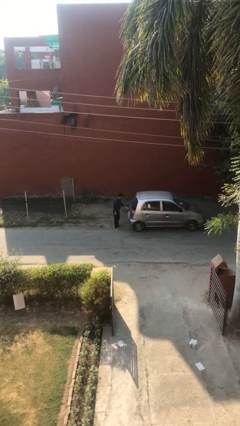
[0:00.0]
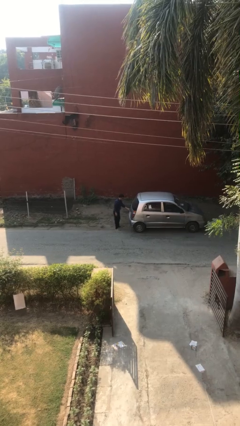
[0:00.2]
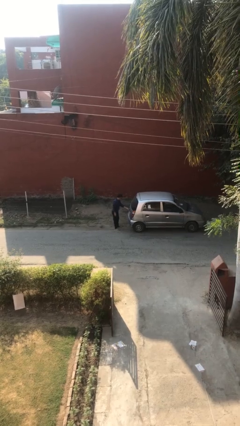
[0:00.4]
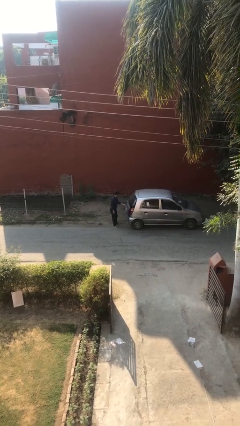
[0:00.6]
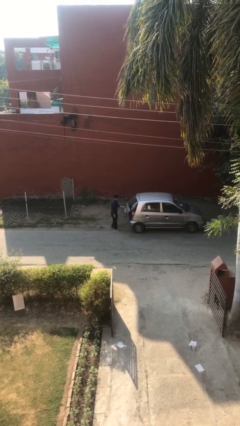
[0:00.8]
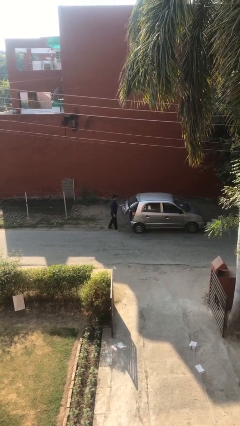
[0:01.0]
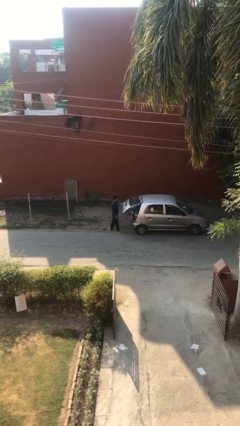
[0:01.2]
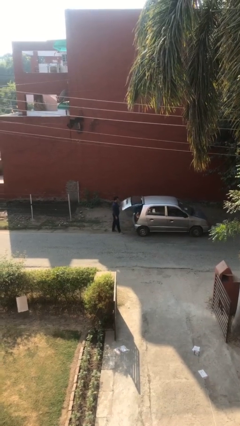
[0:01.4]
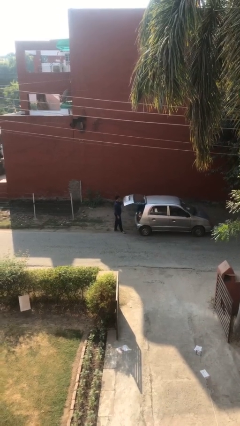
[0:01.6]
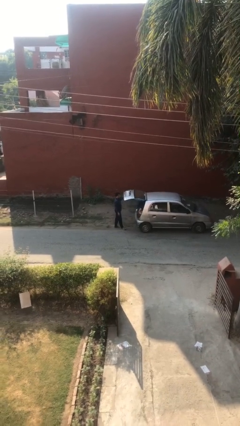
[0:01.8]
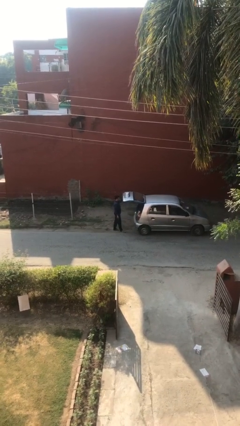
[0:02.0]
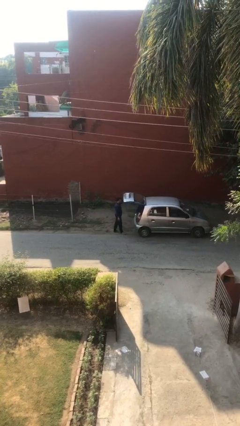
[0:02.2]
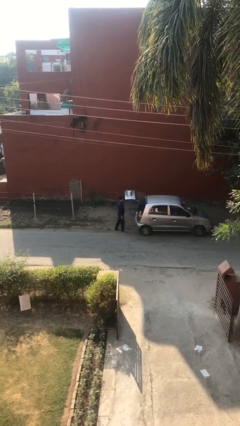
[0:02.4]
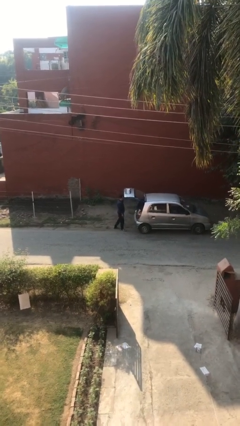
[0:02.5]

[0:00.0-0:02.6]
person opens car trunk

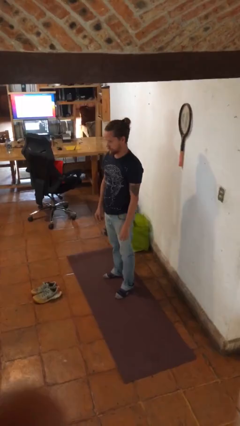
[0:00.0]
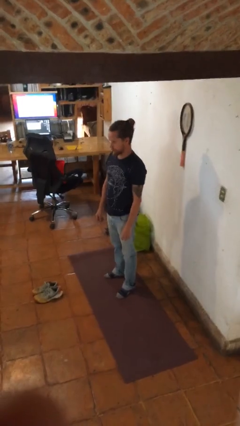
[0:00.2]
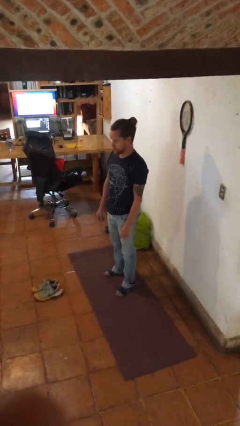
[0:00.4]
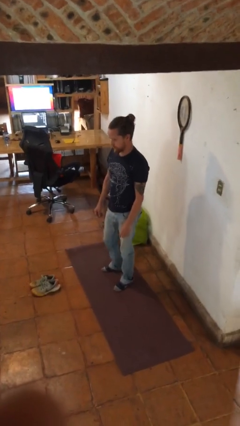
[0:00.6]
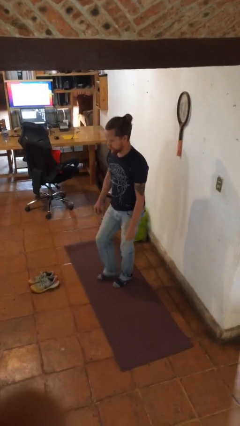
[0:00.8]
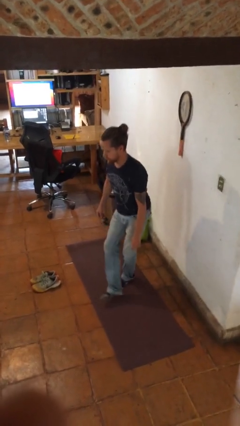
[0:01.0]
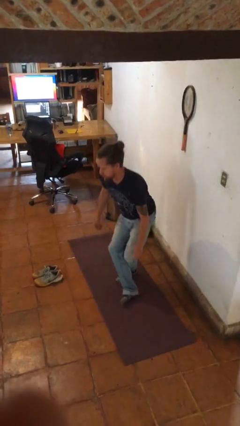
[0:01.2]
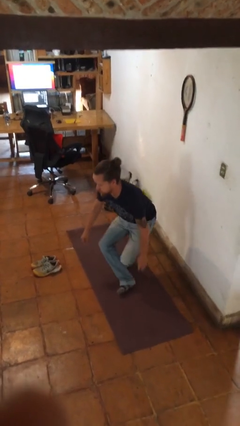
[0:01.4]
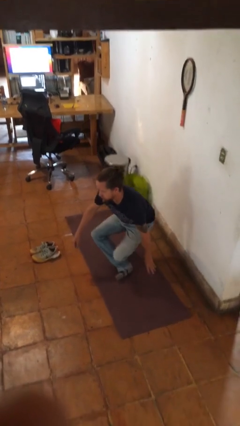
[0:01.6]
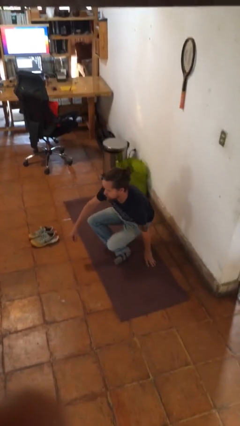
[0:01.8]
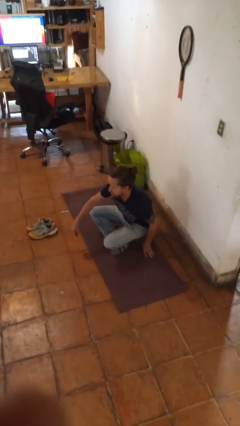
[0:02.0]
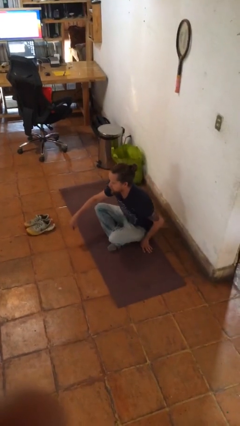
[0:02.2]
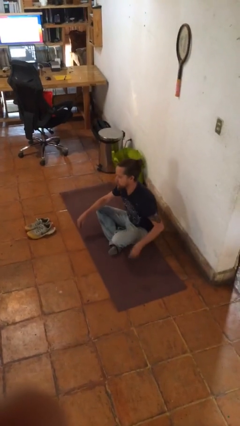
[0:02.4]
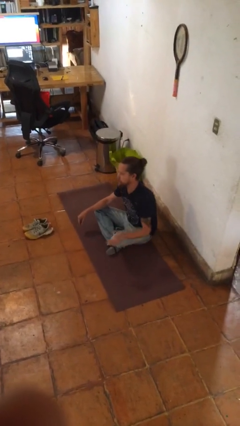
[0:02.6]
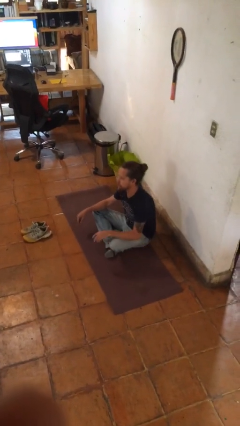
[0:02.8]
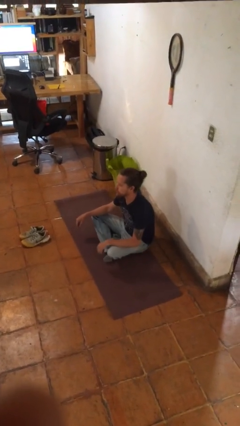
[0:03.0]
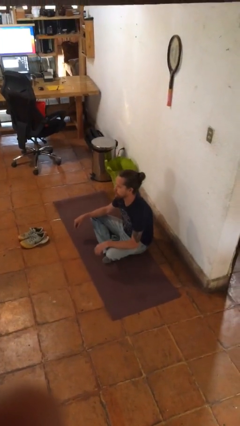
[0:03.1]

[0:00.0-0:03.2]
person sits crisscross

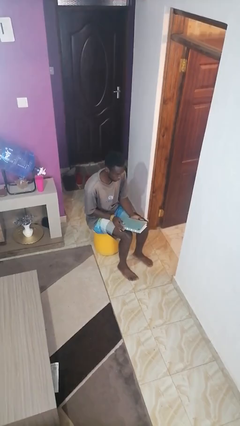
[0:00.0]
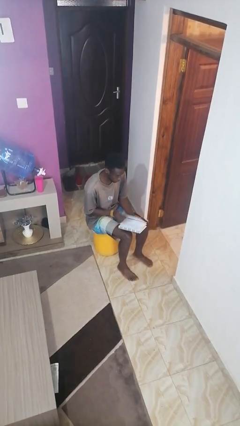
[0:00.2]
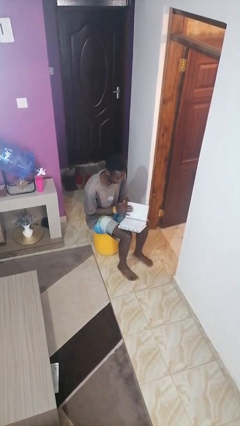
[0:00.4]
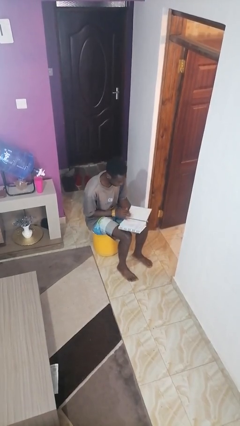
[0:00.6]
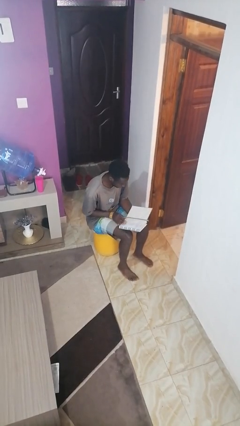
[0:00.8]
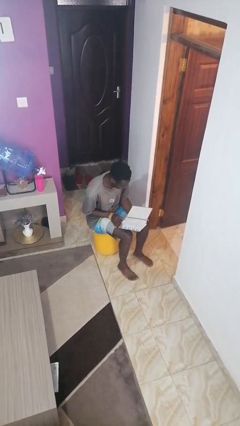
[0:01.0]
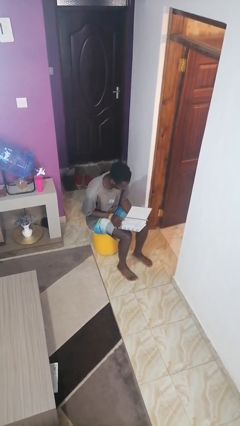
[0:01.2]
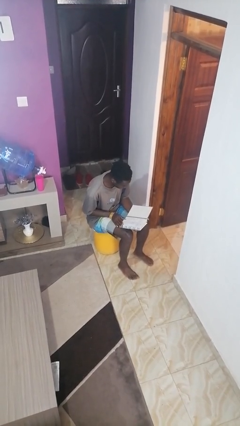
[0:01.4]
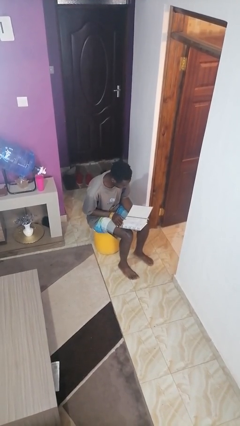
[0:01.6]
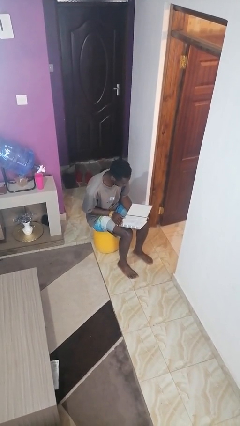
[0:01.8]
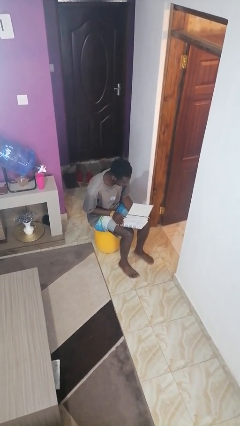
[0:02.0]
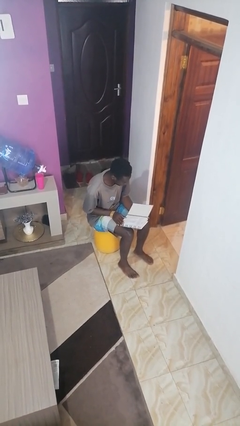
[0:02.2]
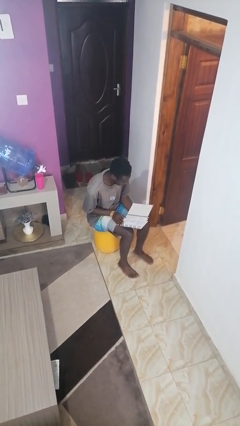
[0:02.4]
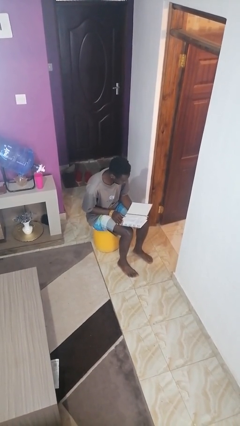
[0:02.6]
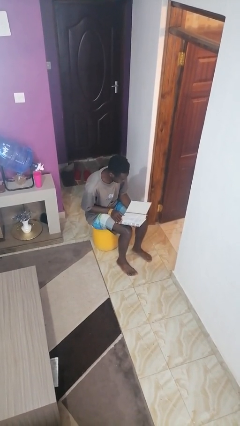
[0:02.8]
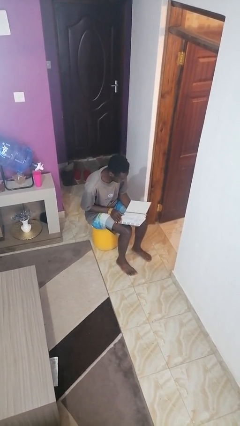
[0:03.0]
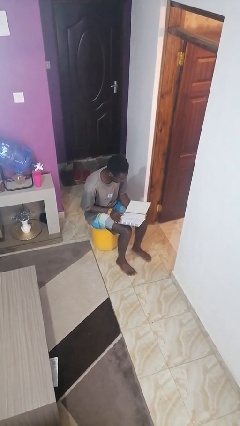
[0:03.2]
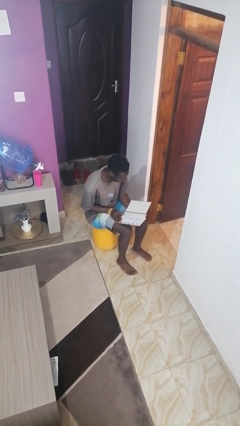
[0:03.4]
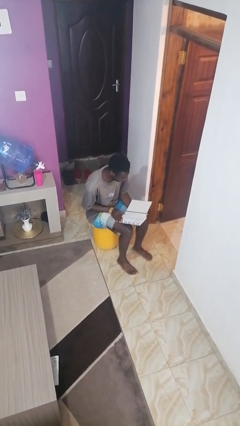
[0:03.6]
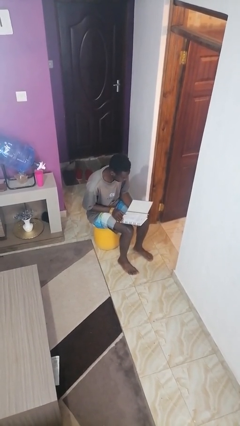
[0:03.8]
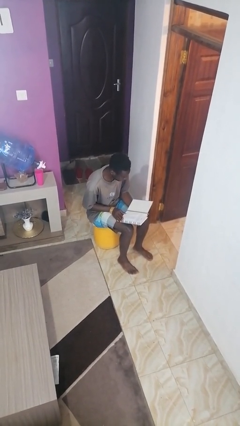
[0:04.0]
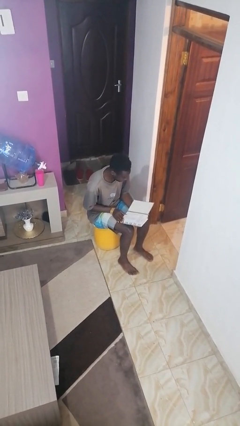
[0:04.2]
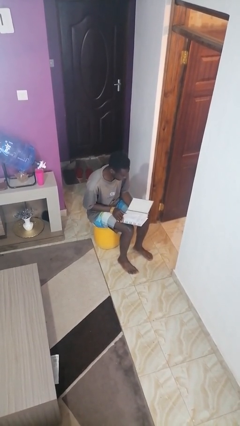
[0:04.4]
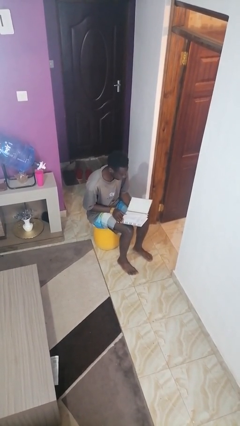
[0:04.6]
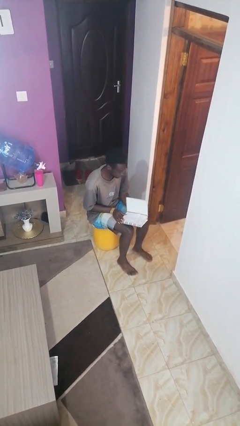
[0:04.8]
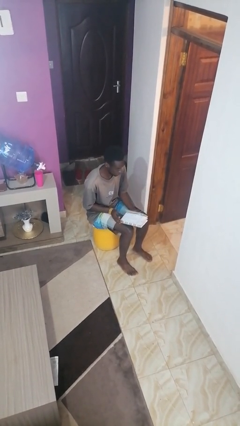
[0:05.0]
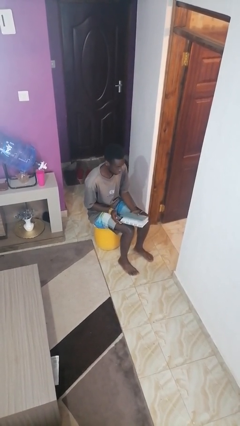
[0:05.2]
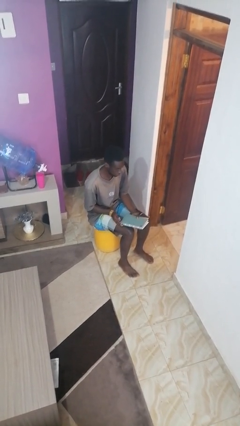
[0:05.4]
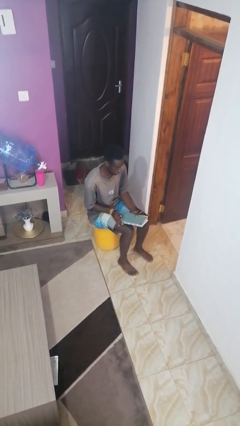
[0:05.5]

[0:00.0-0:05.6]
person reads book

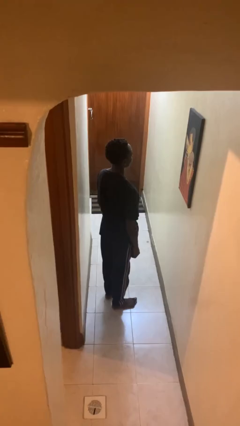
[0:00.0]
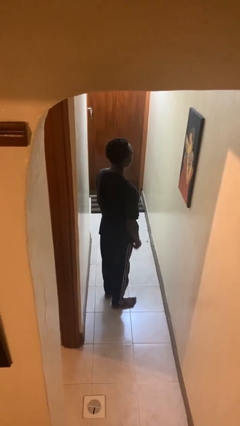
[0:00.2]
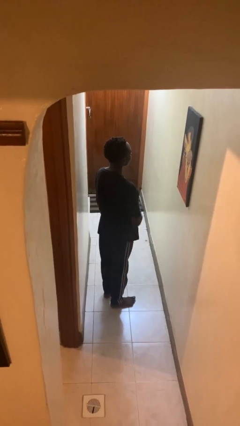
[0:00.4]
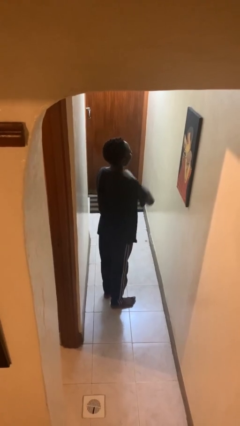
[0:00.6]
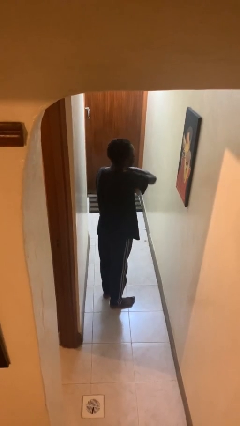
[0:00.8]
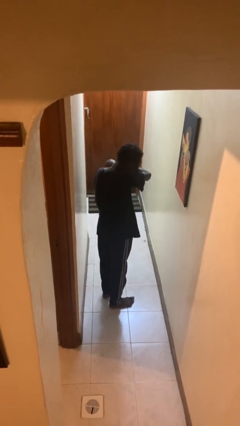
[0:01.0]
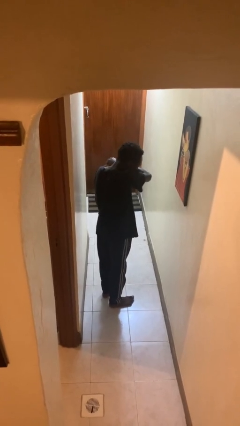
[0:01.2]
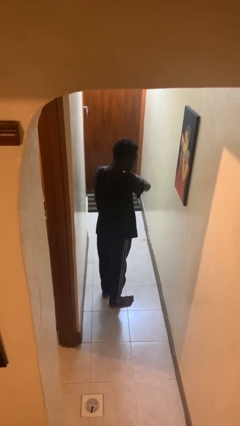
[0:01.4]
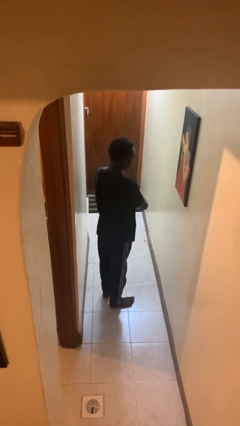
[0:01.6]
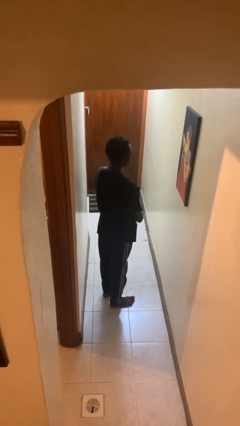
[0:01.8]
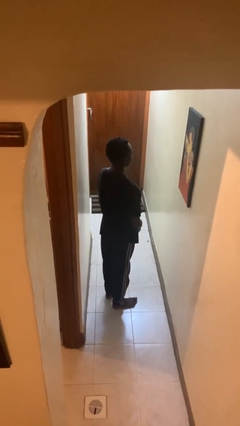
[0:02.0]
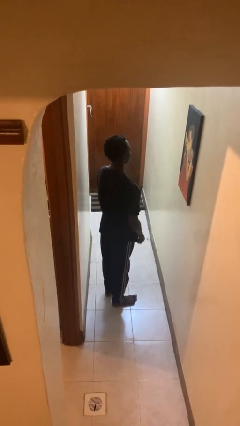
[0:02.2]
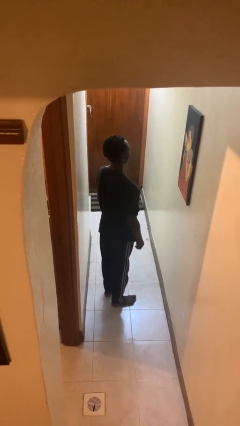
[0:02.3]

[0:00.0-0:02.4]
person sneezes into arm

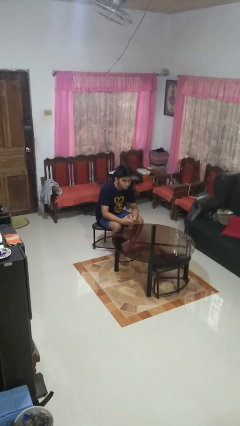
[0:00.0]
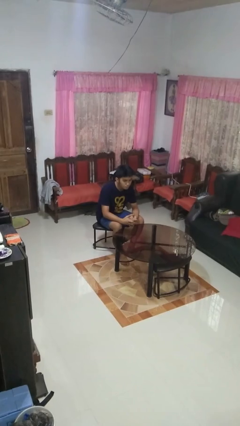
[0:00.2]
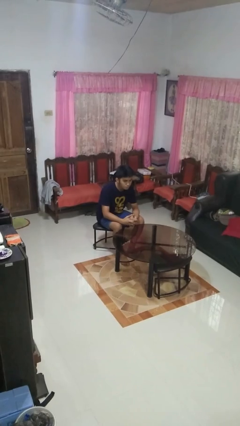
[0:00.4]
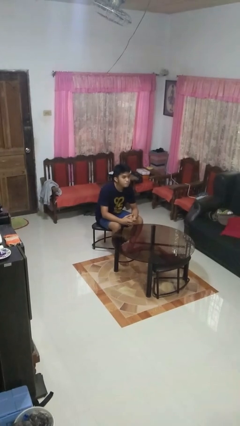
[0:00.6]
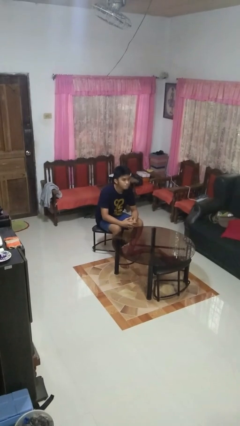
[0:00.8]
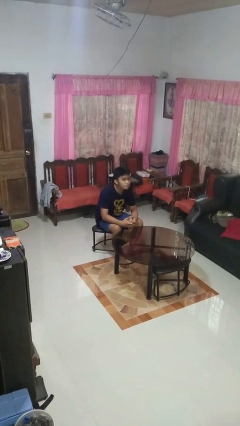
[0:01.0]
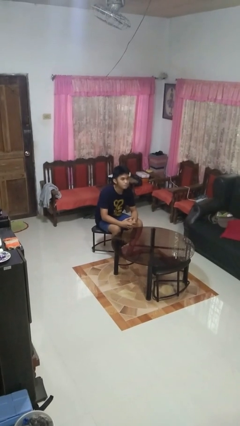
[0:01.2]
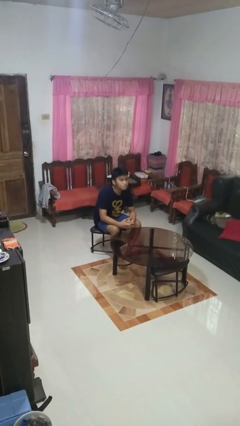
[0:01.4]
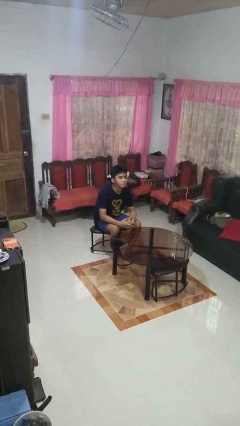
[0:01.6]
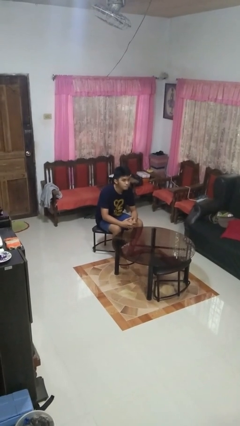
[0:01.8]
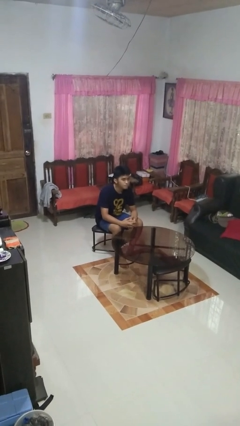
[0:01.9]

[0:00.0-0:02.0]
person nods head

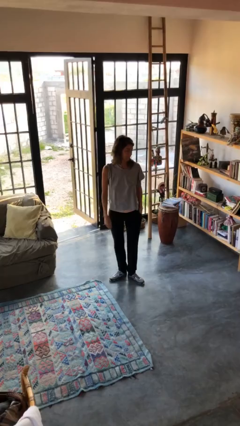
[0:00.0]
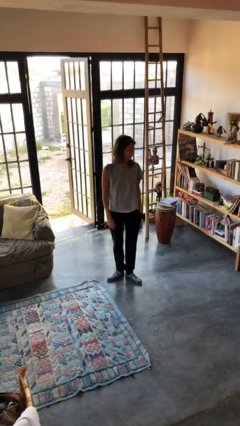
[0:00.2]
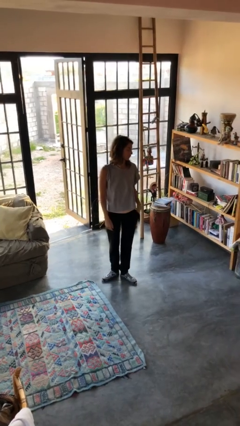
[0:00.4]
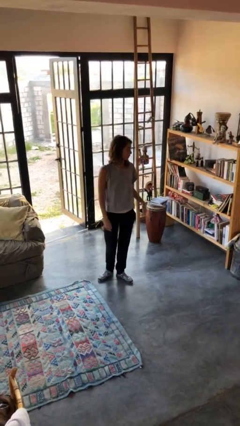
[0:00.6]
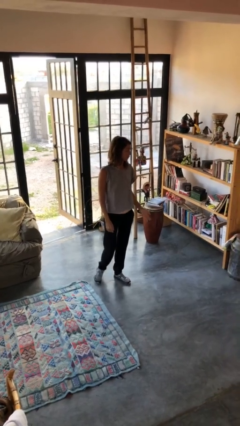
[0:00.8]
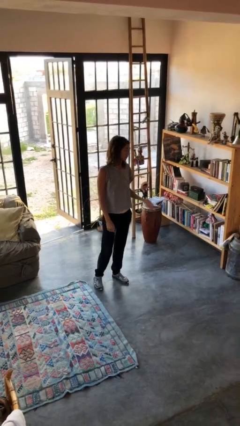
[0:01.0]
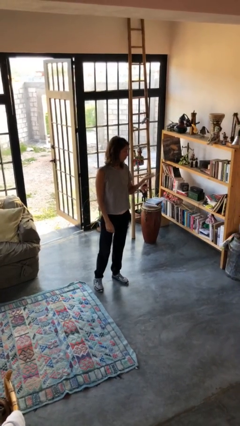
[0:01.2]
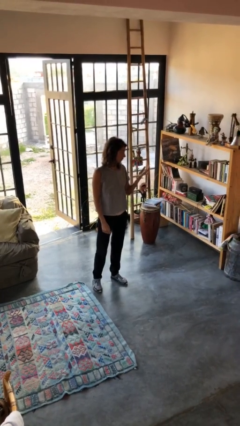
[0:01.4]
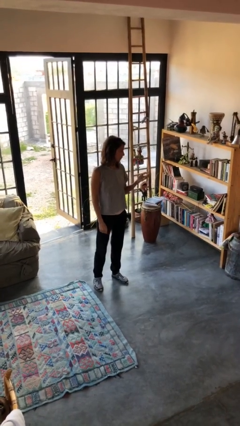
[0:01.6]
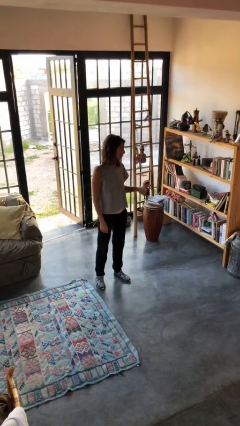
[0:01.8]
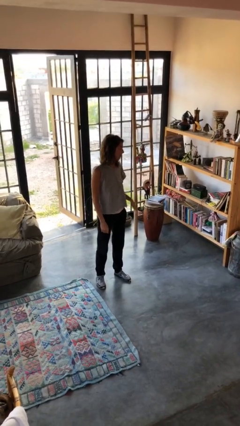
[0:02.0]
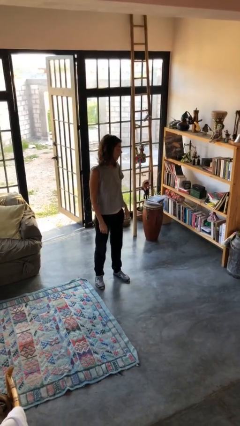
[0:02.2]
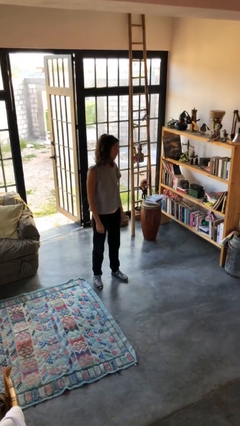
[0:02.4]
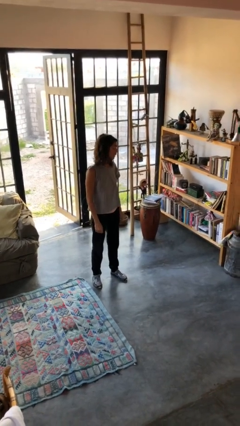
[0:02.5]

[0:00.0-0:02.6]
person gestures swipe up
